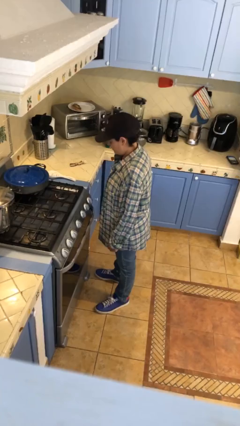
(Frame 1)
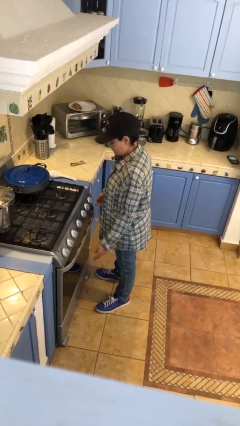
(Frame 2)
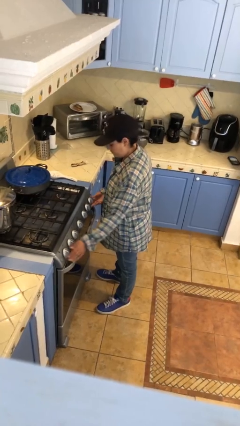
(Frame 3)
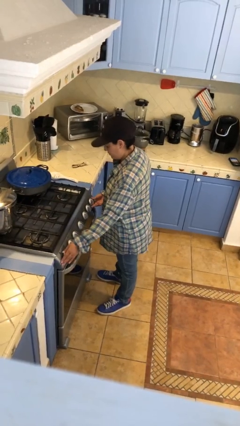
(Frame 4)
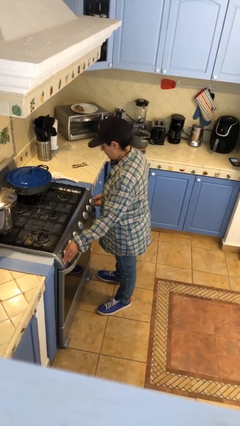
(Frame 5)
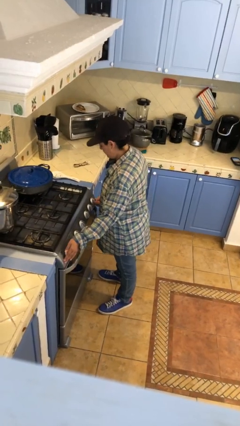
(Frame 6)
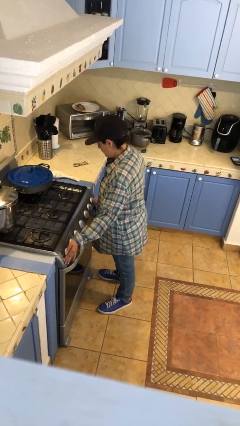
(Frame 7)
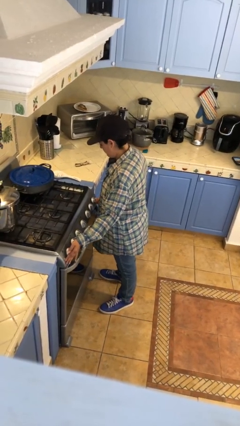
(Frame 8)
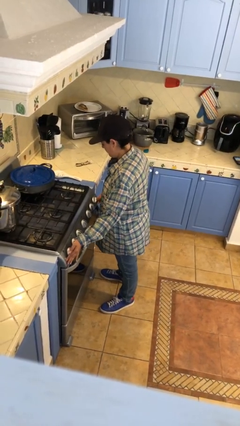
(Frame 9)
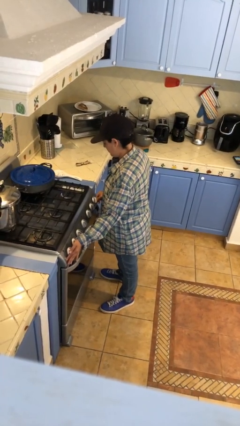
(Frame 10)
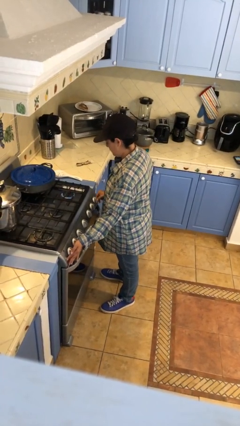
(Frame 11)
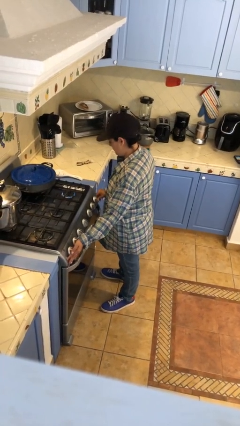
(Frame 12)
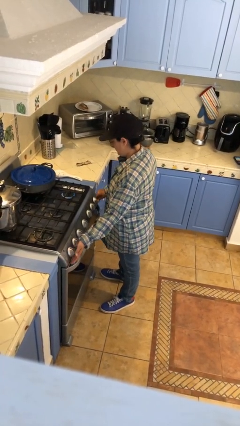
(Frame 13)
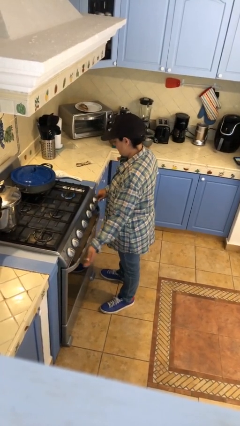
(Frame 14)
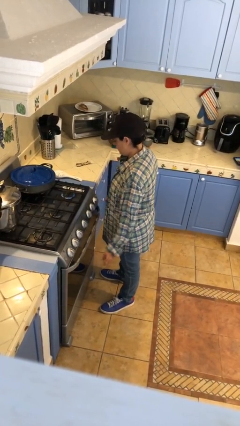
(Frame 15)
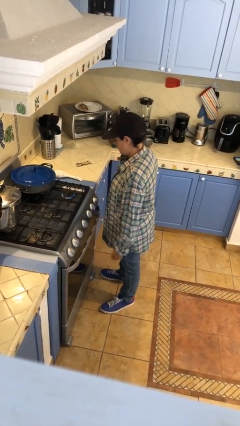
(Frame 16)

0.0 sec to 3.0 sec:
person turns on stovetop

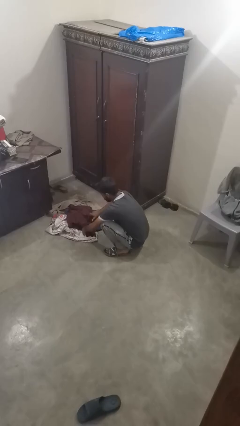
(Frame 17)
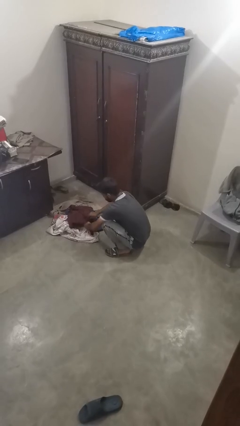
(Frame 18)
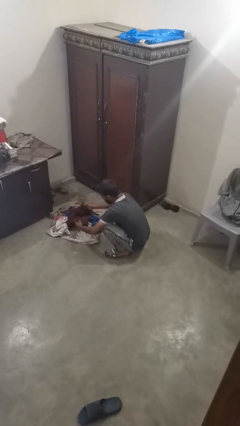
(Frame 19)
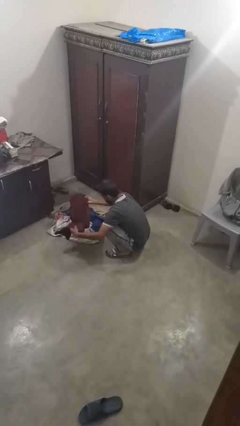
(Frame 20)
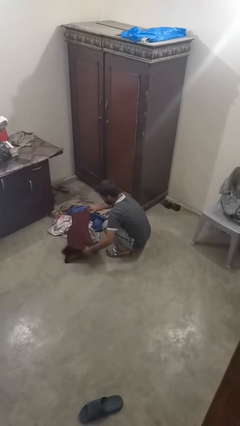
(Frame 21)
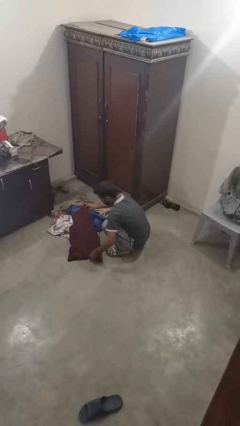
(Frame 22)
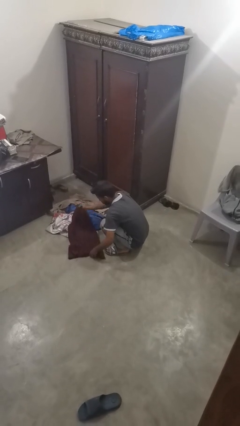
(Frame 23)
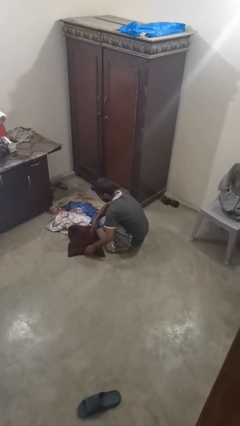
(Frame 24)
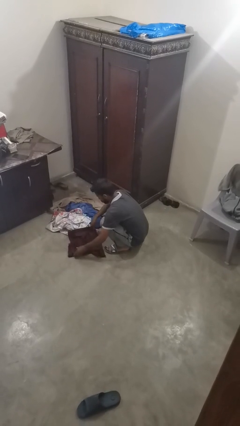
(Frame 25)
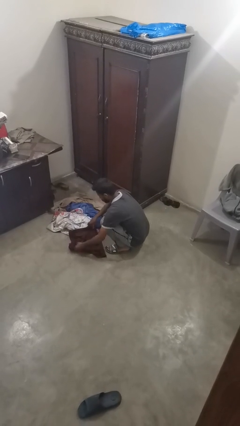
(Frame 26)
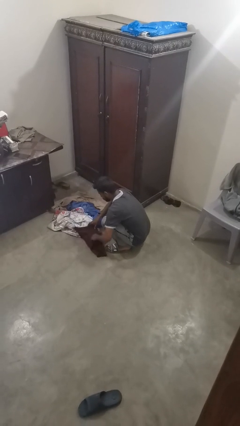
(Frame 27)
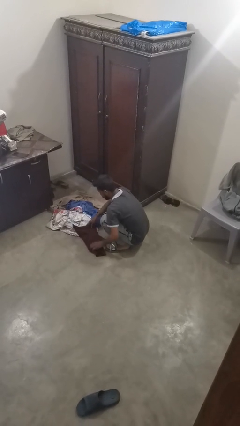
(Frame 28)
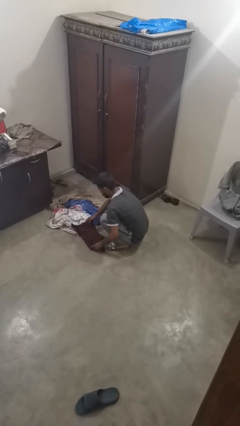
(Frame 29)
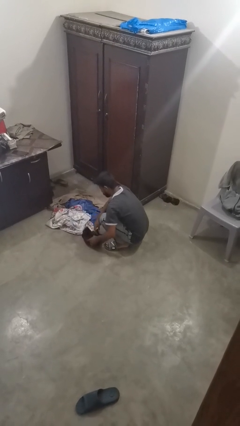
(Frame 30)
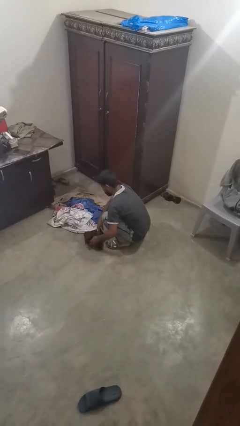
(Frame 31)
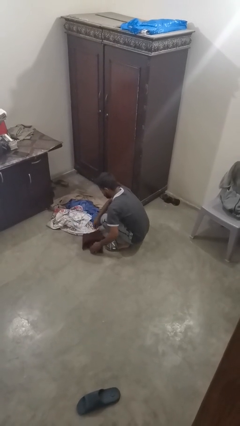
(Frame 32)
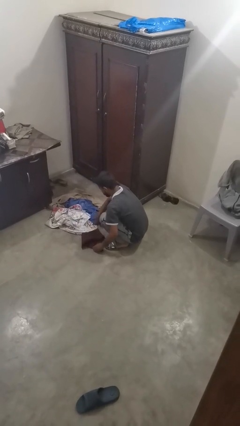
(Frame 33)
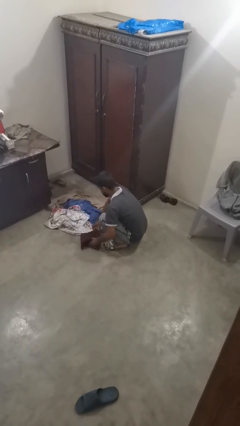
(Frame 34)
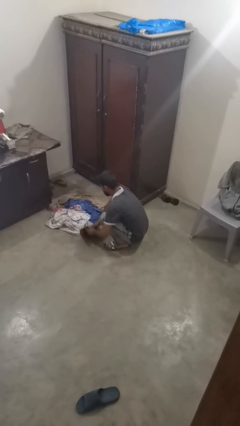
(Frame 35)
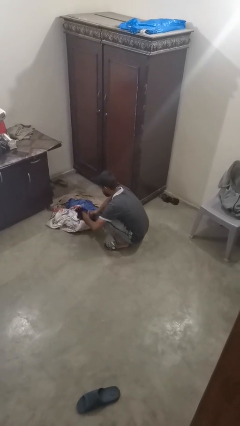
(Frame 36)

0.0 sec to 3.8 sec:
person folds shirt

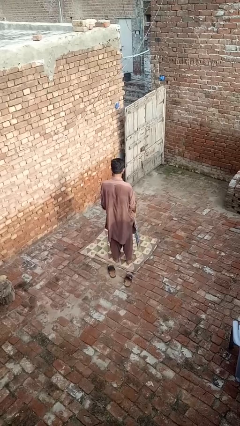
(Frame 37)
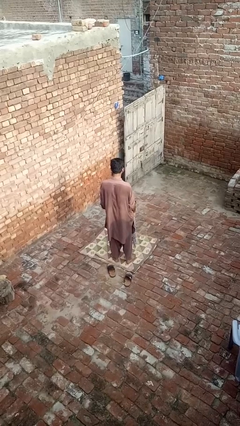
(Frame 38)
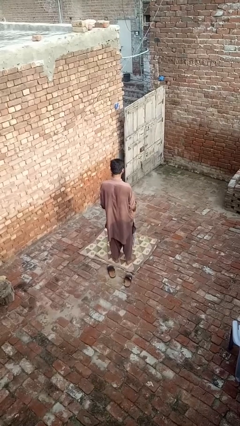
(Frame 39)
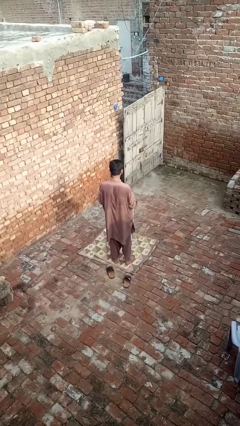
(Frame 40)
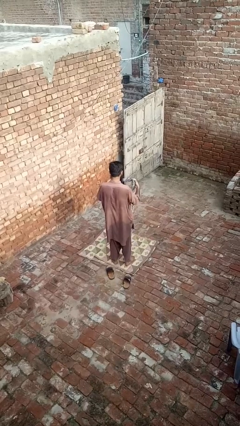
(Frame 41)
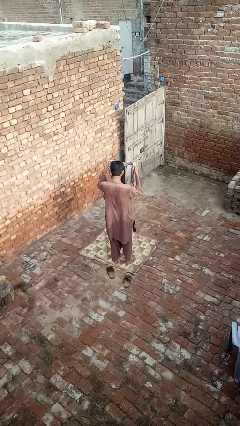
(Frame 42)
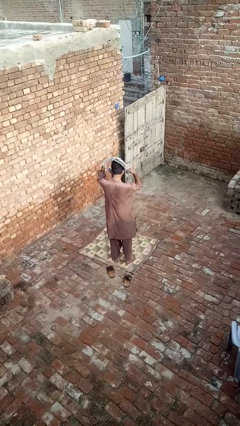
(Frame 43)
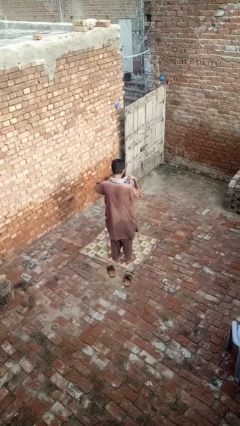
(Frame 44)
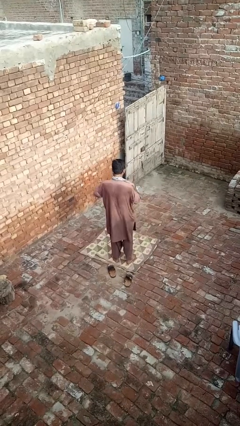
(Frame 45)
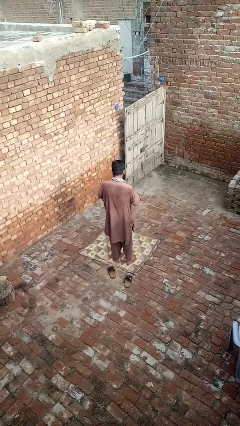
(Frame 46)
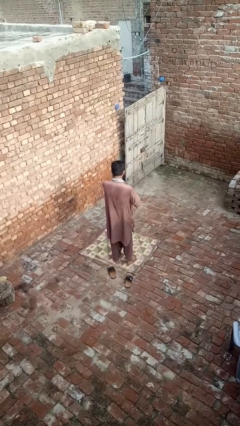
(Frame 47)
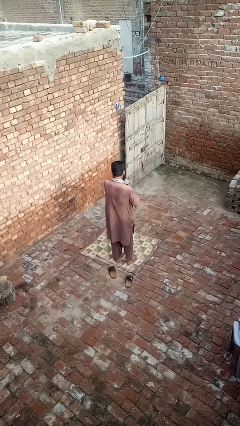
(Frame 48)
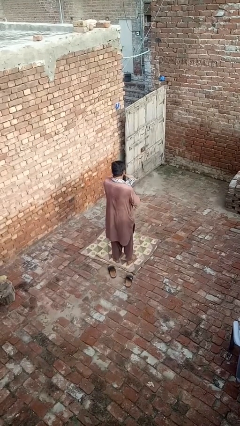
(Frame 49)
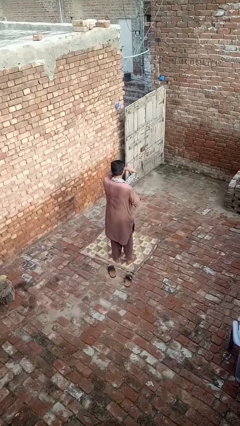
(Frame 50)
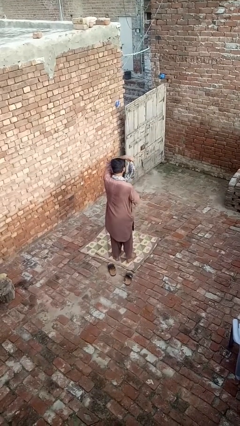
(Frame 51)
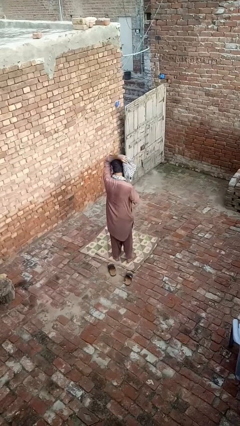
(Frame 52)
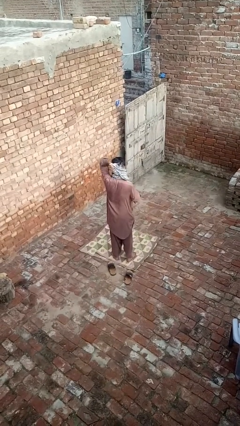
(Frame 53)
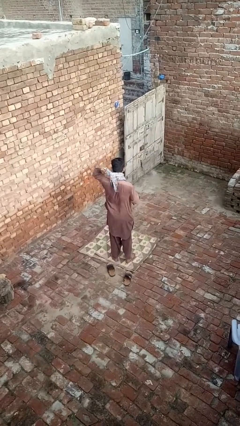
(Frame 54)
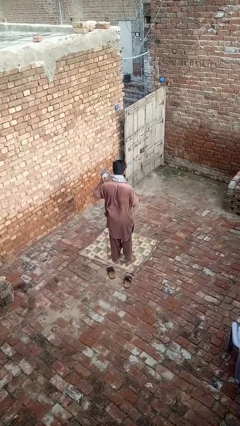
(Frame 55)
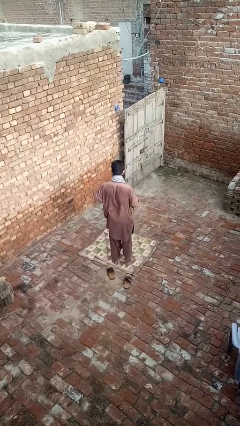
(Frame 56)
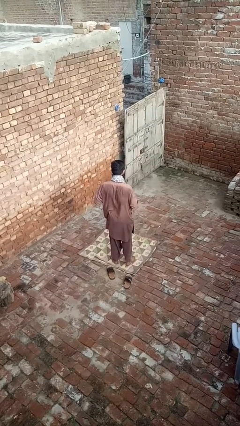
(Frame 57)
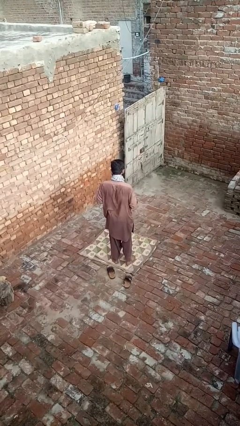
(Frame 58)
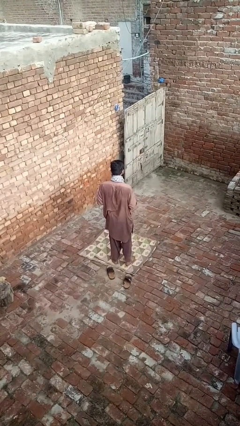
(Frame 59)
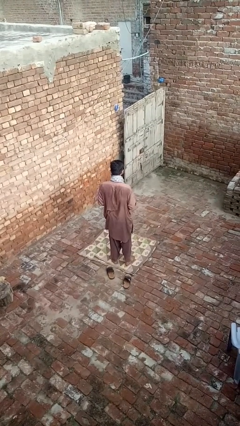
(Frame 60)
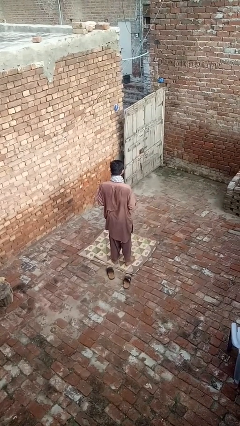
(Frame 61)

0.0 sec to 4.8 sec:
person puts on scarf

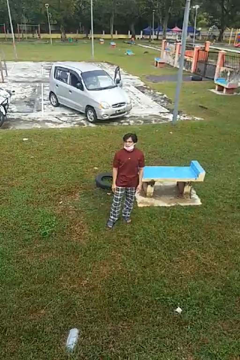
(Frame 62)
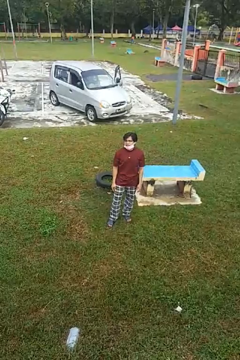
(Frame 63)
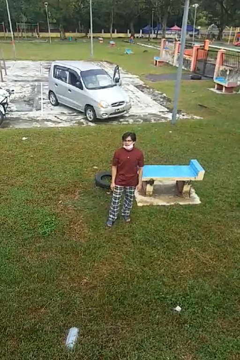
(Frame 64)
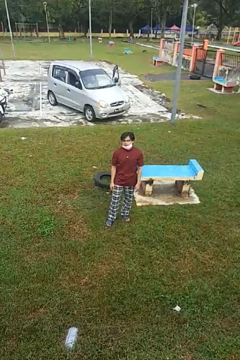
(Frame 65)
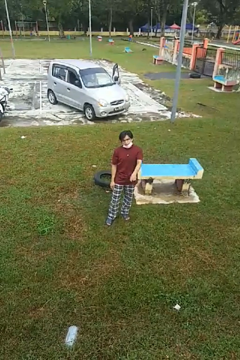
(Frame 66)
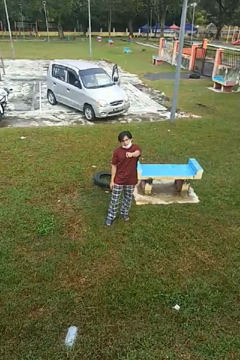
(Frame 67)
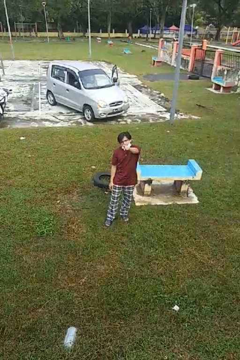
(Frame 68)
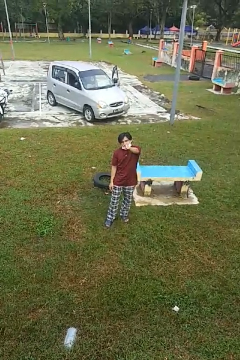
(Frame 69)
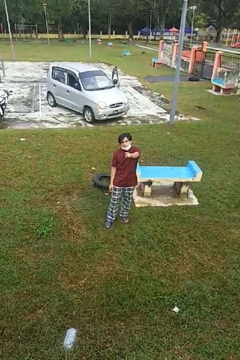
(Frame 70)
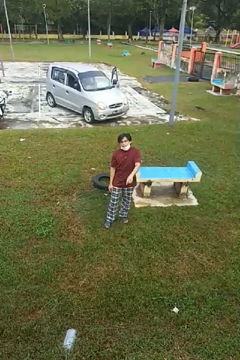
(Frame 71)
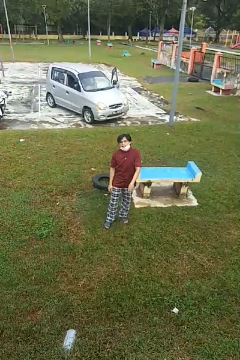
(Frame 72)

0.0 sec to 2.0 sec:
person points at person

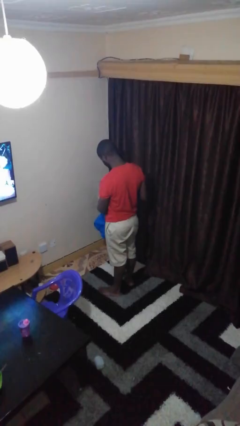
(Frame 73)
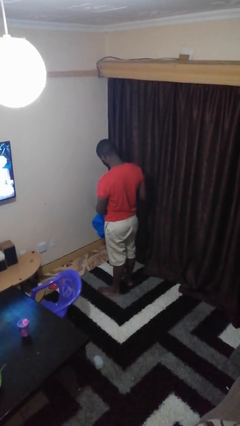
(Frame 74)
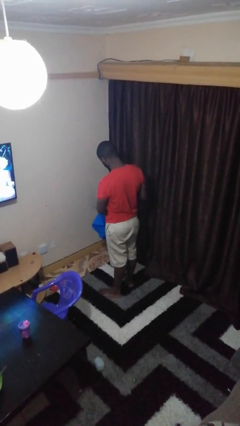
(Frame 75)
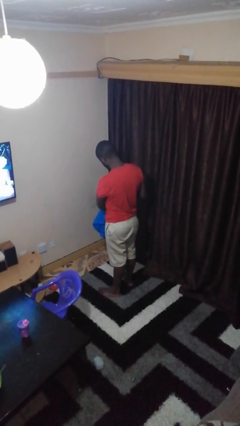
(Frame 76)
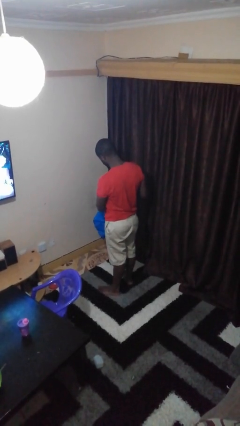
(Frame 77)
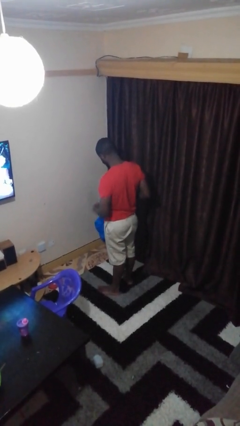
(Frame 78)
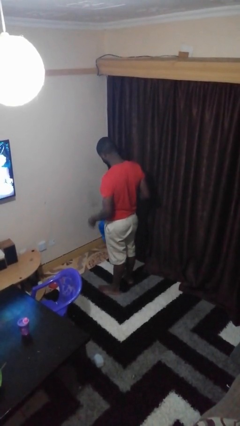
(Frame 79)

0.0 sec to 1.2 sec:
person puts object into bag

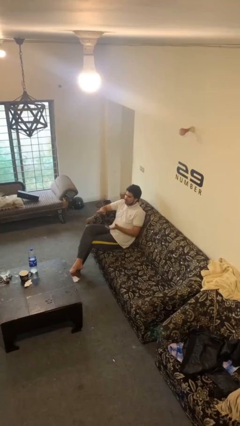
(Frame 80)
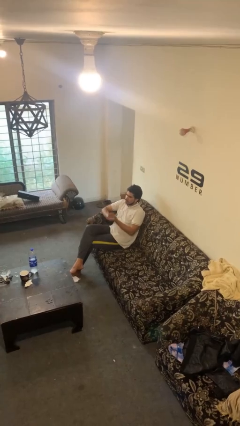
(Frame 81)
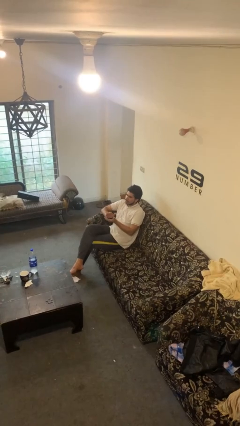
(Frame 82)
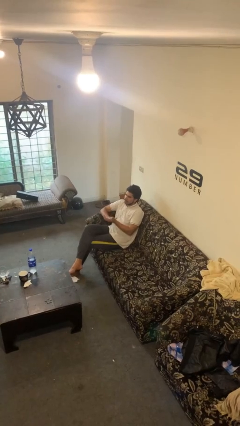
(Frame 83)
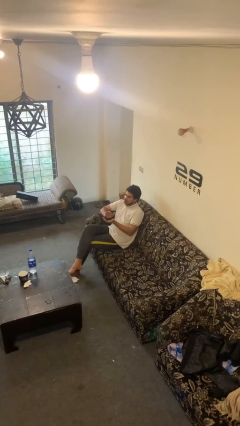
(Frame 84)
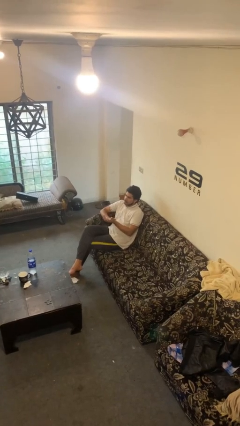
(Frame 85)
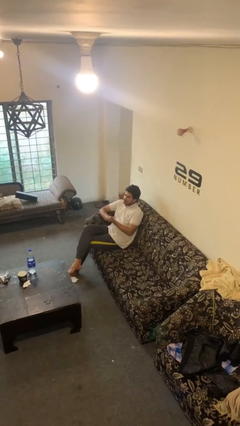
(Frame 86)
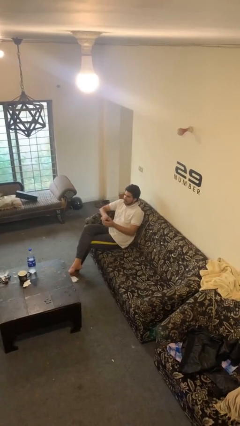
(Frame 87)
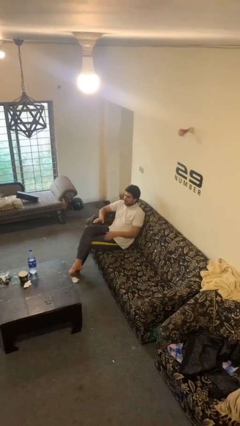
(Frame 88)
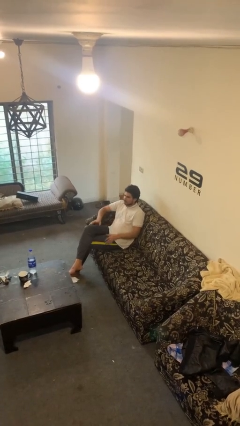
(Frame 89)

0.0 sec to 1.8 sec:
person claps hands

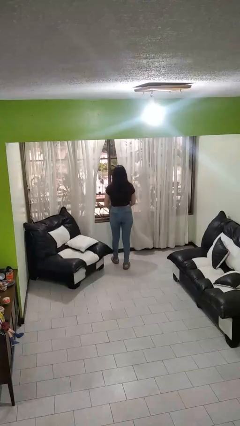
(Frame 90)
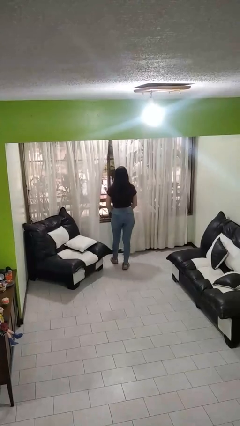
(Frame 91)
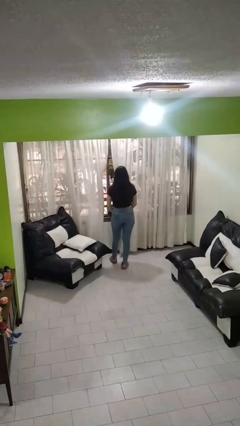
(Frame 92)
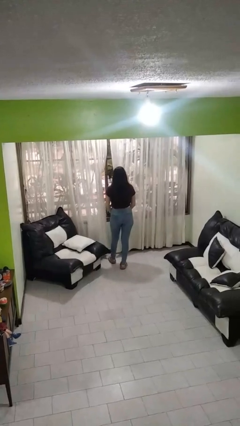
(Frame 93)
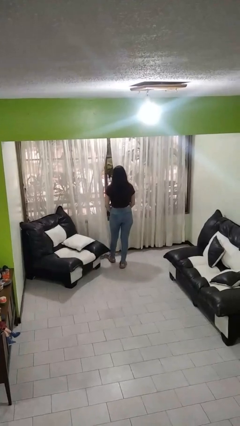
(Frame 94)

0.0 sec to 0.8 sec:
person closes curtains

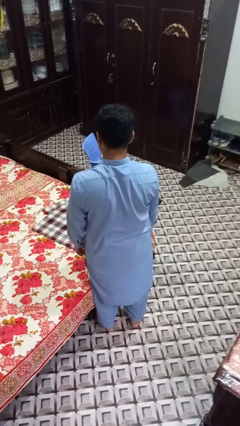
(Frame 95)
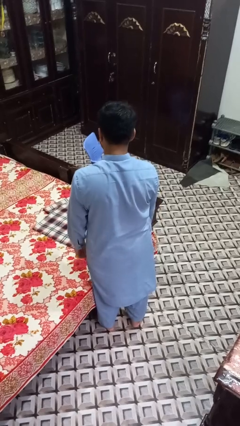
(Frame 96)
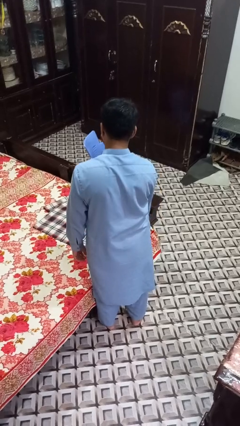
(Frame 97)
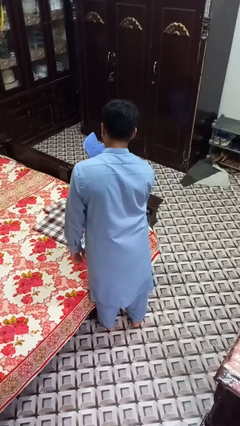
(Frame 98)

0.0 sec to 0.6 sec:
person makes bed
